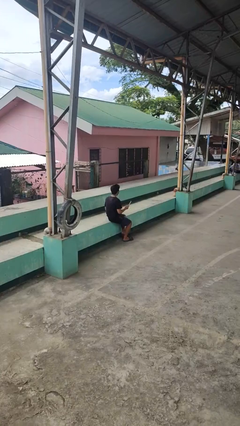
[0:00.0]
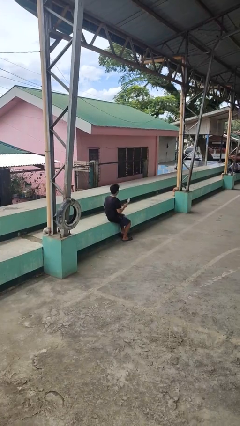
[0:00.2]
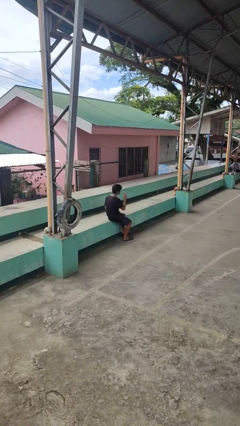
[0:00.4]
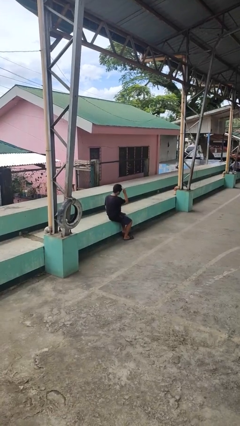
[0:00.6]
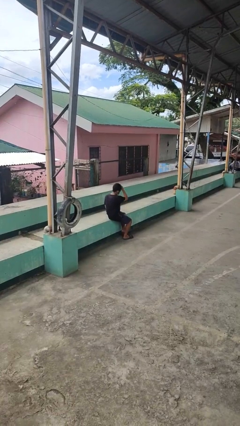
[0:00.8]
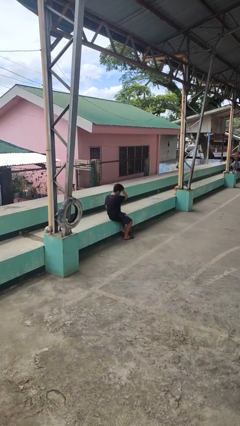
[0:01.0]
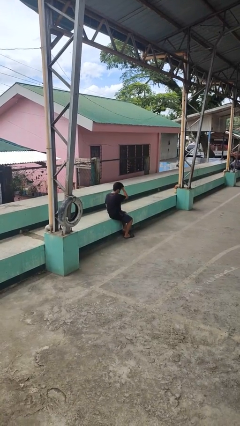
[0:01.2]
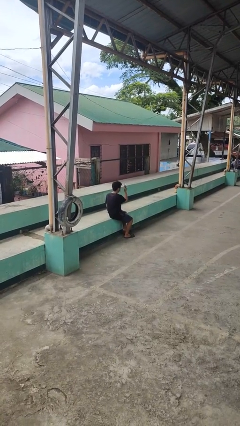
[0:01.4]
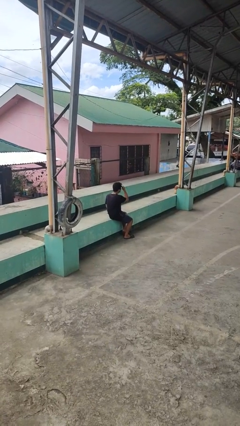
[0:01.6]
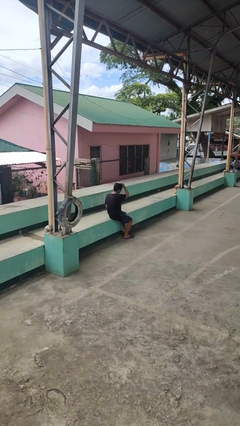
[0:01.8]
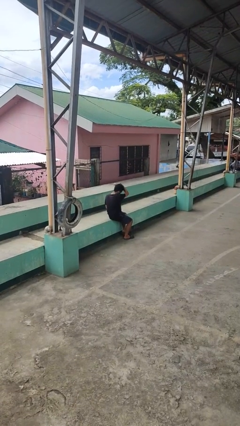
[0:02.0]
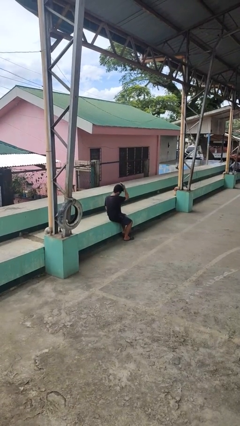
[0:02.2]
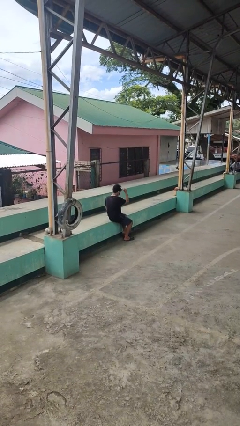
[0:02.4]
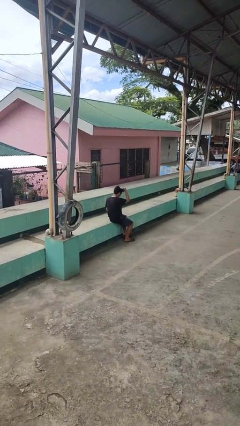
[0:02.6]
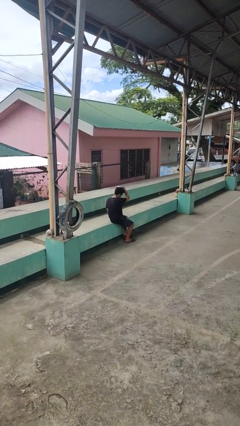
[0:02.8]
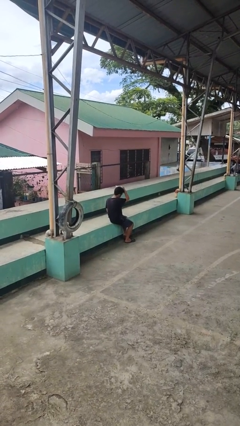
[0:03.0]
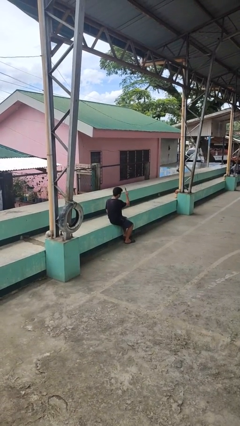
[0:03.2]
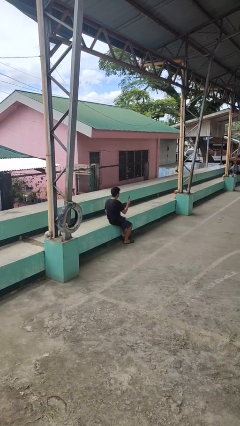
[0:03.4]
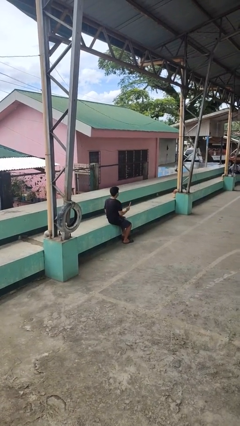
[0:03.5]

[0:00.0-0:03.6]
person brushes hair

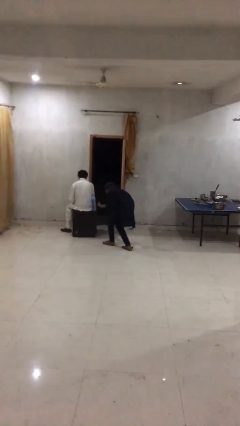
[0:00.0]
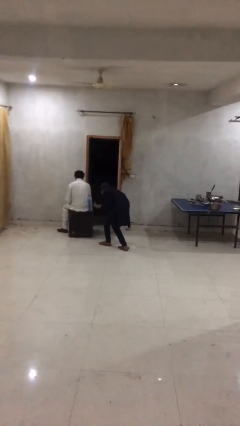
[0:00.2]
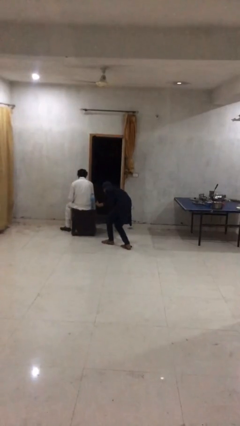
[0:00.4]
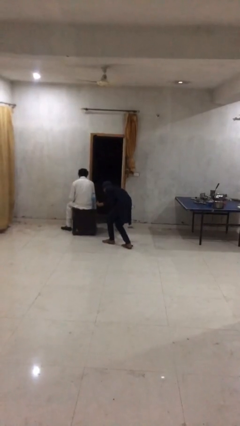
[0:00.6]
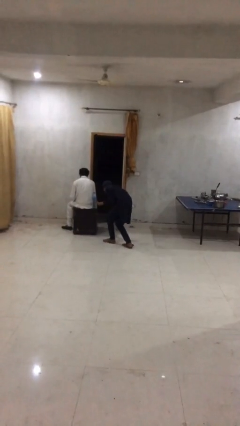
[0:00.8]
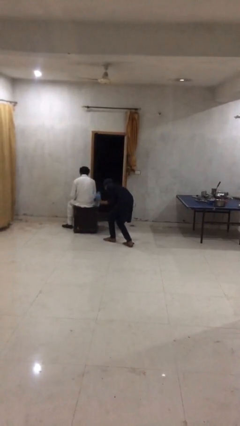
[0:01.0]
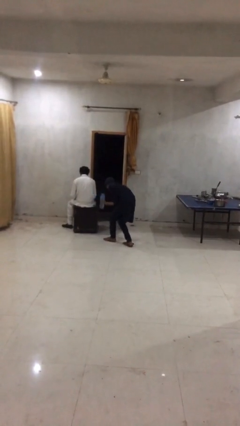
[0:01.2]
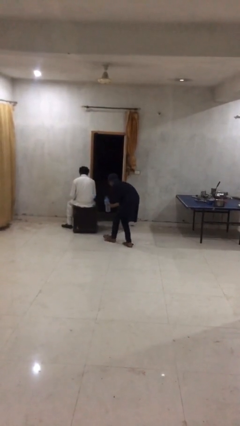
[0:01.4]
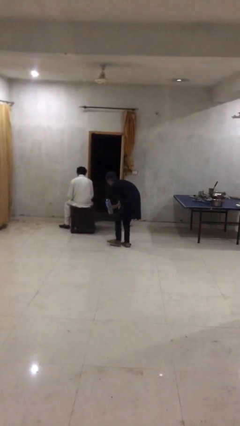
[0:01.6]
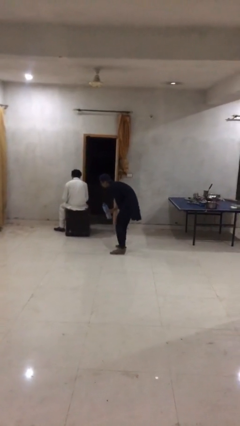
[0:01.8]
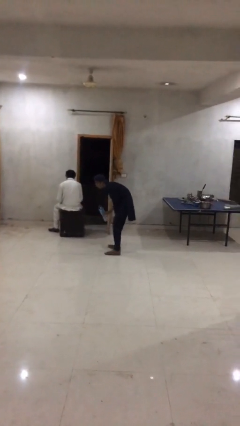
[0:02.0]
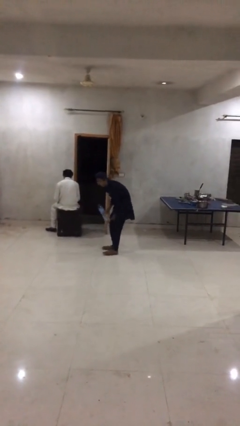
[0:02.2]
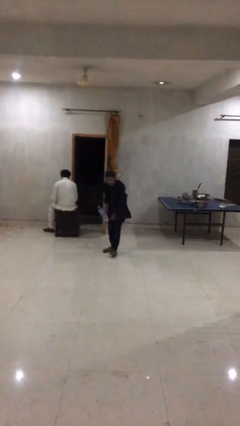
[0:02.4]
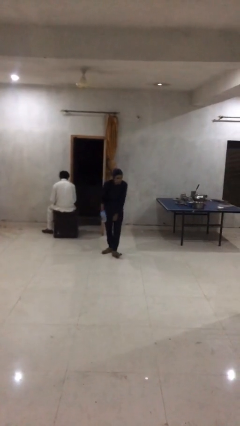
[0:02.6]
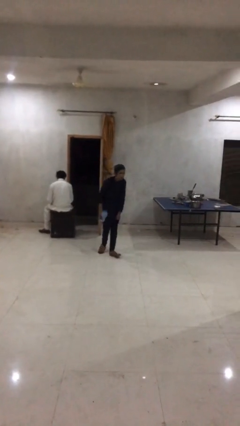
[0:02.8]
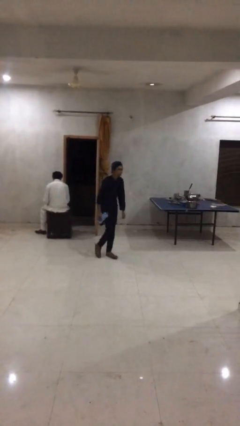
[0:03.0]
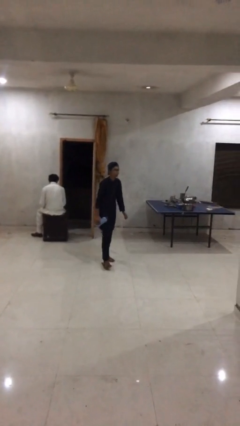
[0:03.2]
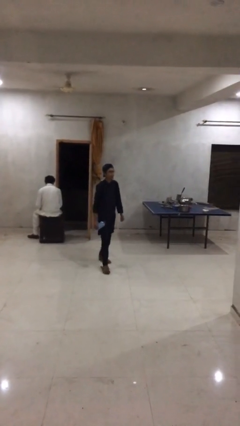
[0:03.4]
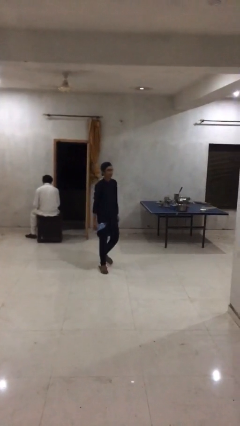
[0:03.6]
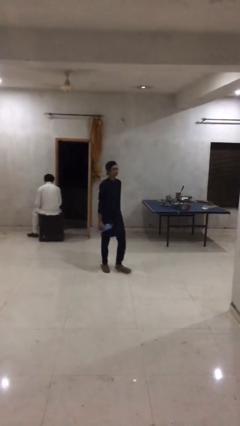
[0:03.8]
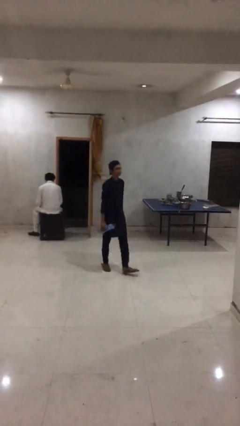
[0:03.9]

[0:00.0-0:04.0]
person steals object from person

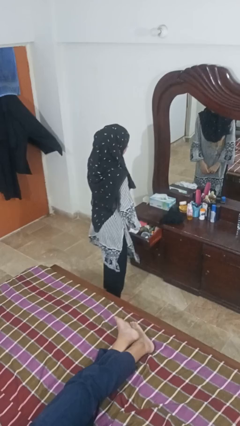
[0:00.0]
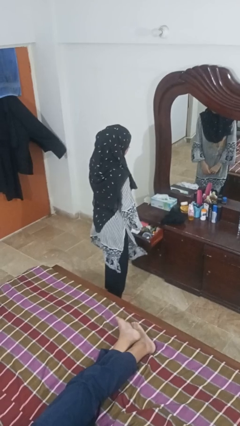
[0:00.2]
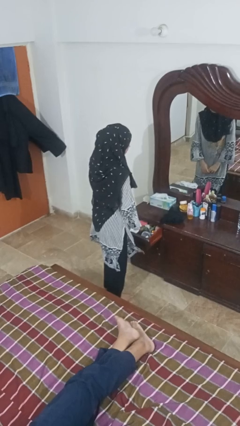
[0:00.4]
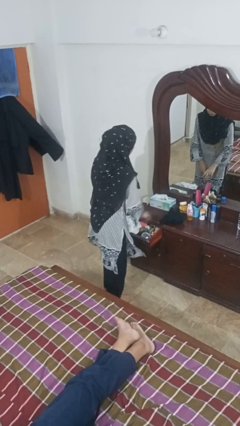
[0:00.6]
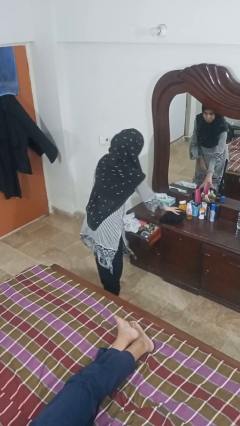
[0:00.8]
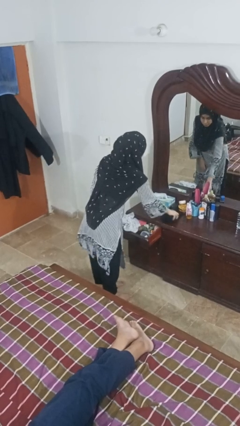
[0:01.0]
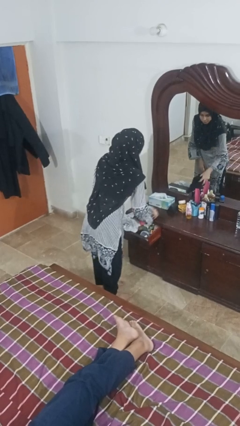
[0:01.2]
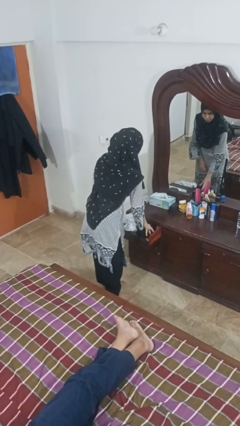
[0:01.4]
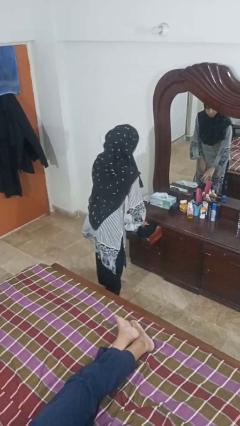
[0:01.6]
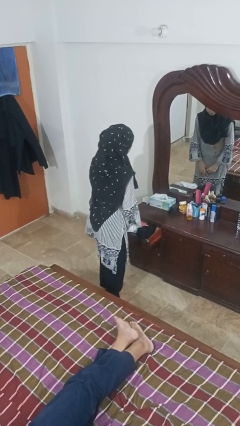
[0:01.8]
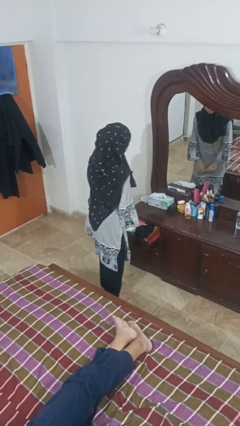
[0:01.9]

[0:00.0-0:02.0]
person puts clothes into dresser

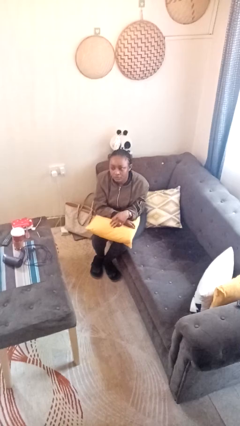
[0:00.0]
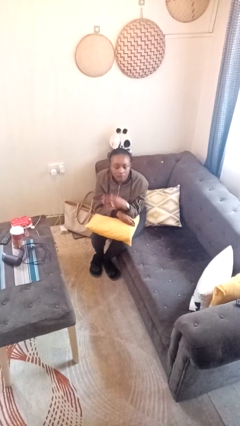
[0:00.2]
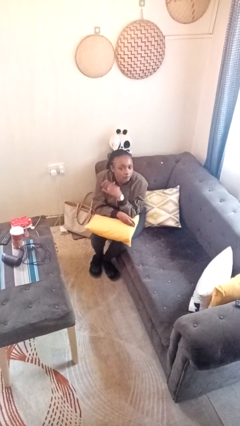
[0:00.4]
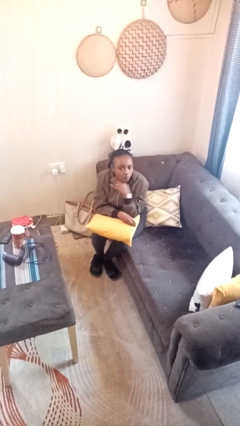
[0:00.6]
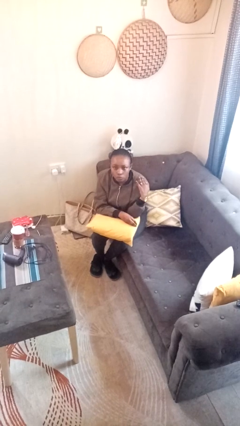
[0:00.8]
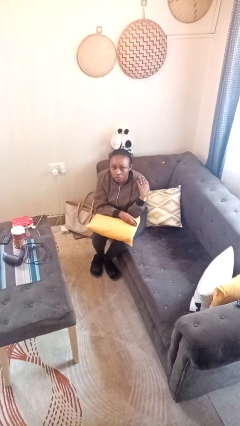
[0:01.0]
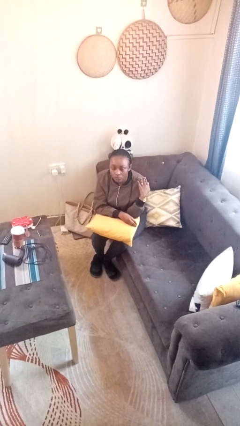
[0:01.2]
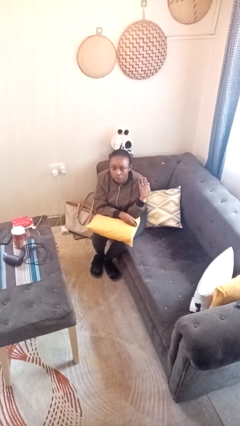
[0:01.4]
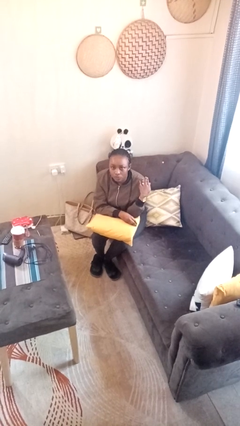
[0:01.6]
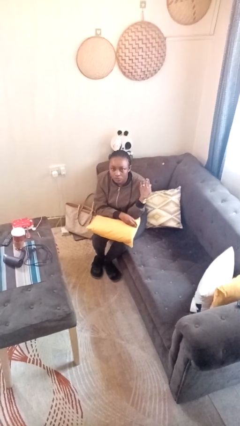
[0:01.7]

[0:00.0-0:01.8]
person gestures cut

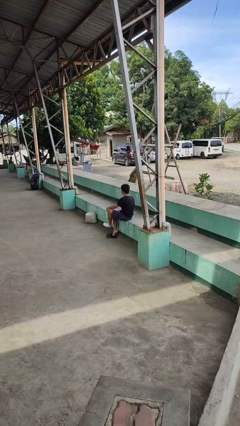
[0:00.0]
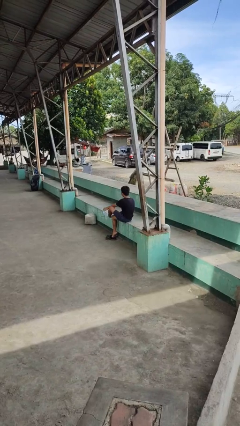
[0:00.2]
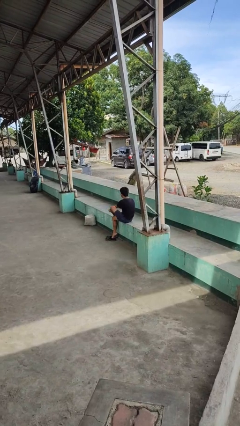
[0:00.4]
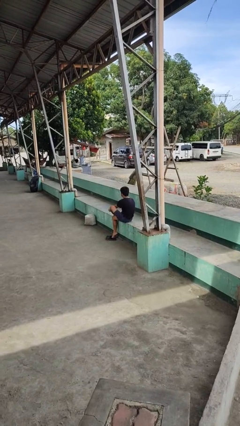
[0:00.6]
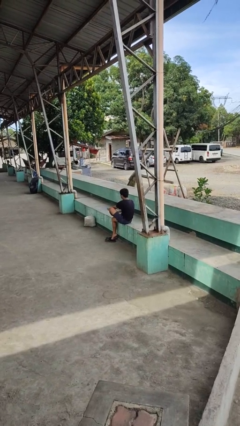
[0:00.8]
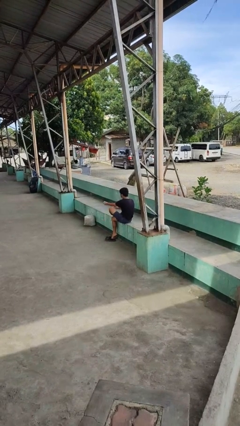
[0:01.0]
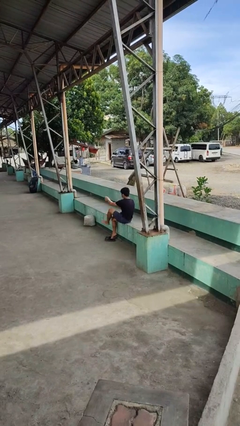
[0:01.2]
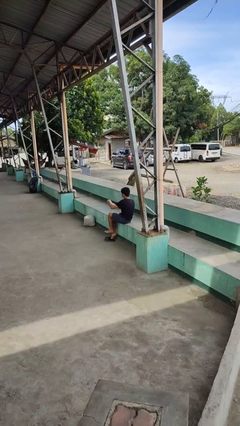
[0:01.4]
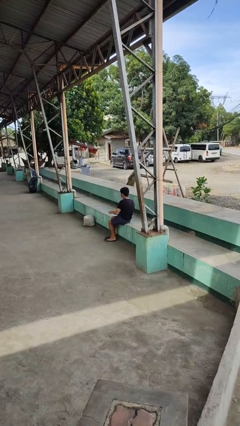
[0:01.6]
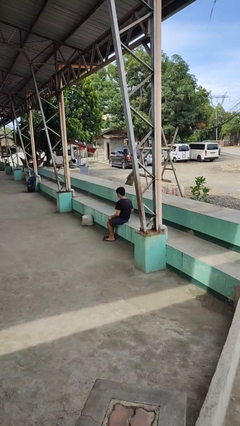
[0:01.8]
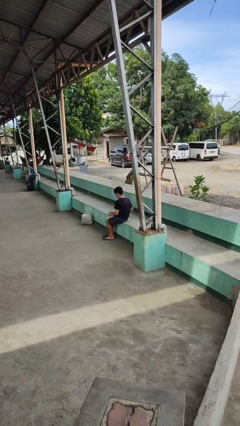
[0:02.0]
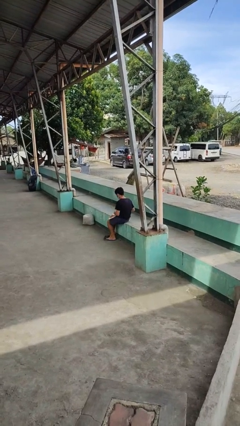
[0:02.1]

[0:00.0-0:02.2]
person takes off socks

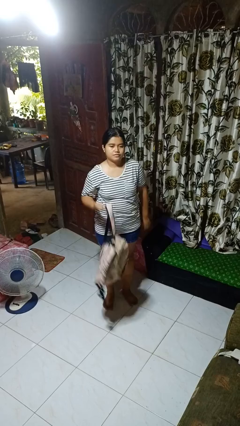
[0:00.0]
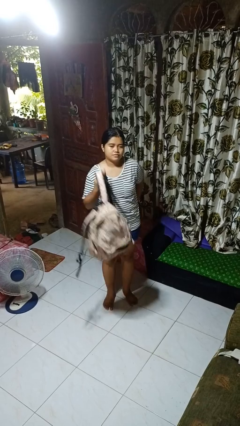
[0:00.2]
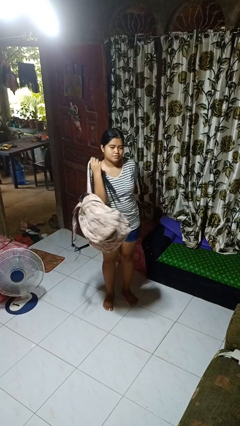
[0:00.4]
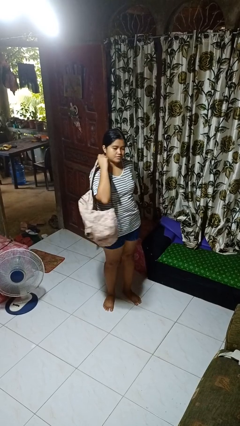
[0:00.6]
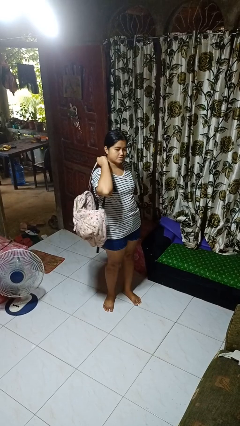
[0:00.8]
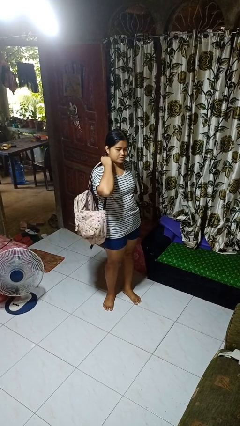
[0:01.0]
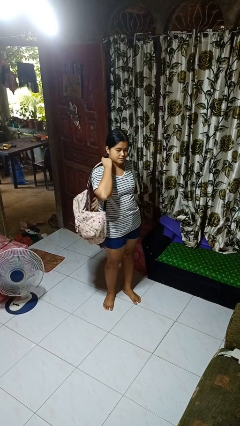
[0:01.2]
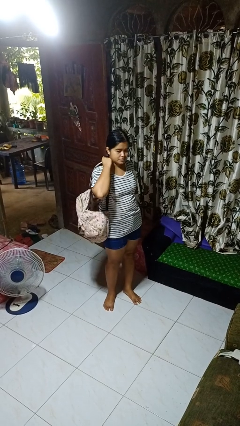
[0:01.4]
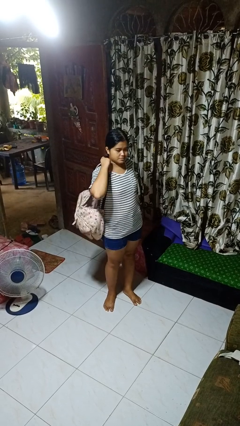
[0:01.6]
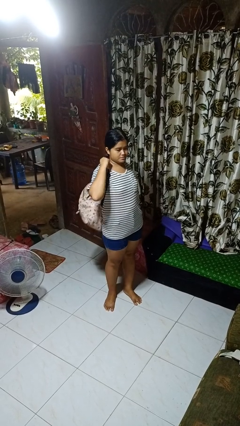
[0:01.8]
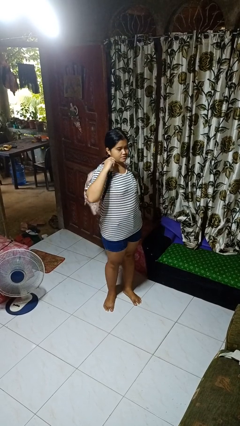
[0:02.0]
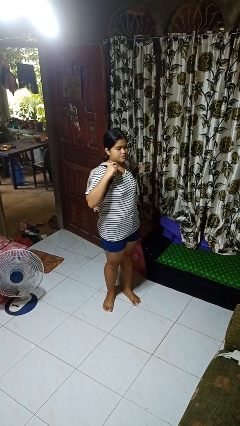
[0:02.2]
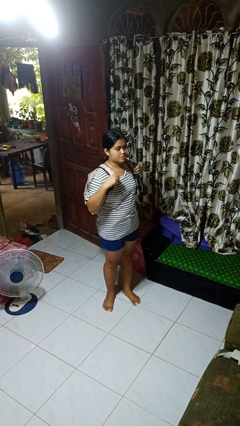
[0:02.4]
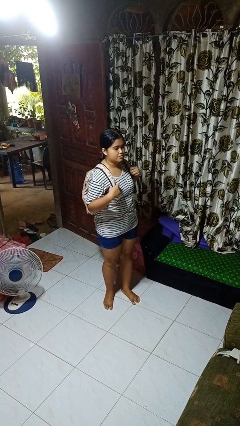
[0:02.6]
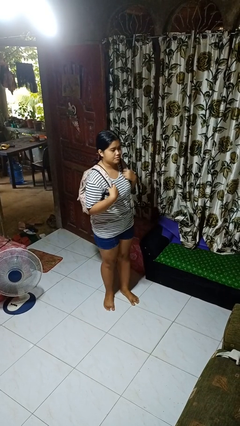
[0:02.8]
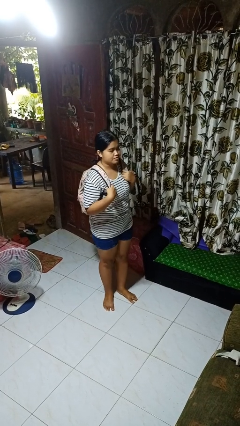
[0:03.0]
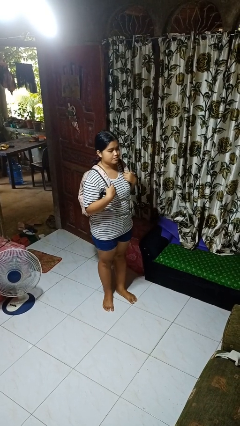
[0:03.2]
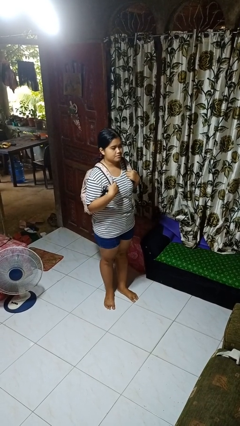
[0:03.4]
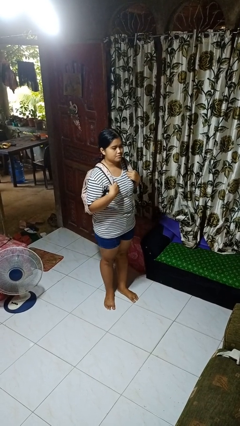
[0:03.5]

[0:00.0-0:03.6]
person puts on backpack

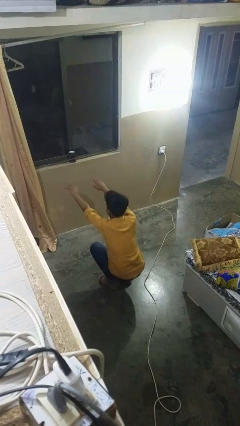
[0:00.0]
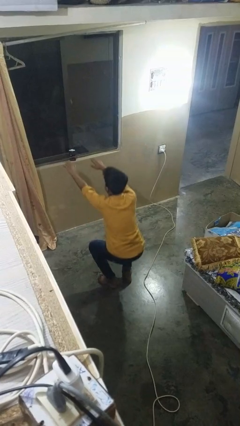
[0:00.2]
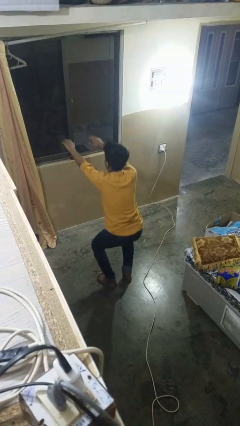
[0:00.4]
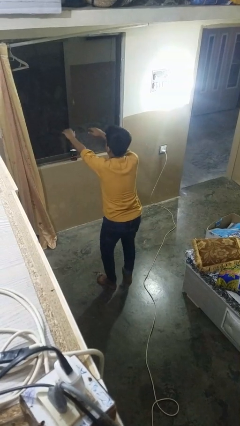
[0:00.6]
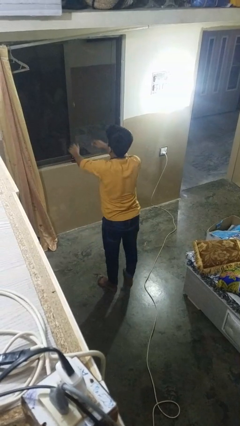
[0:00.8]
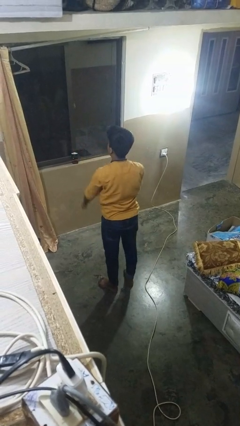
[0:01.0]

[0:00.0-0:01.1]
person stands up
